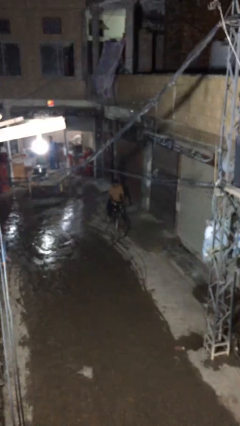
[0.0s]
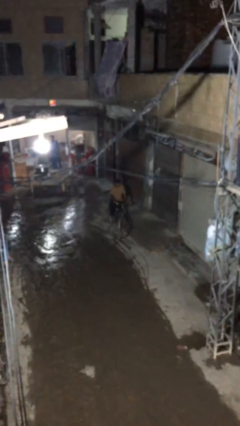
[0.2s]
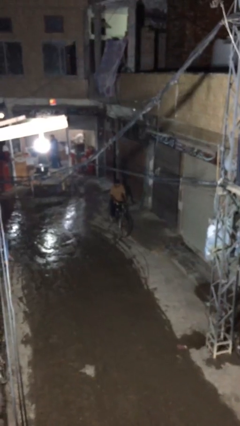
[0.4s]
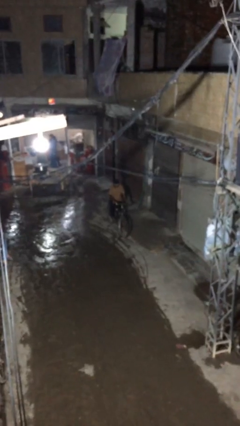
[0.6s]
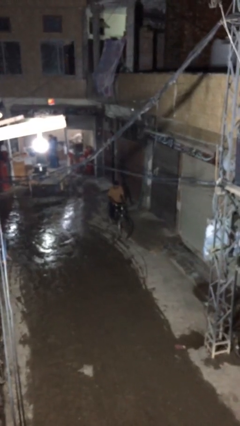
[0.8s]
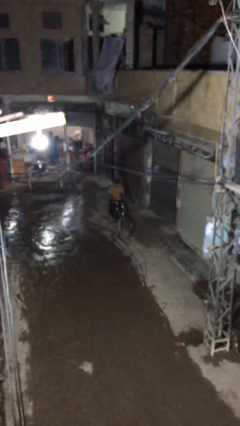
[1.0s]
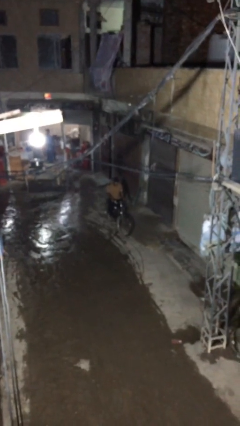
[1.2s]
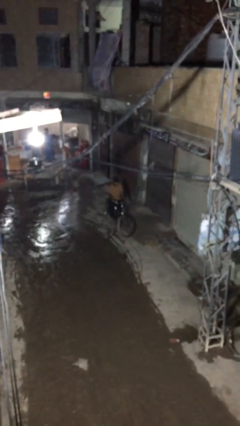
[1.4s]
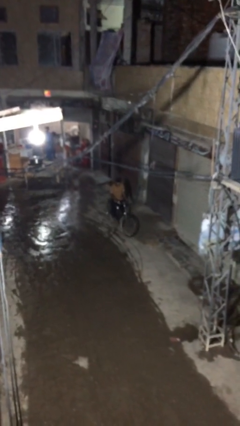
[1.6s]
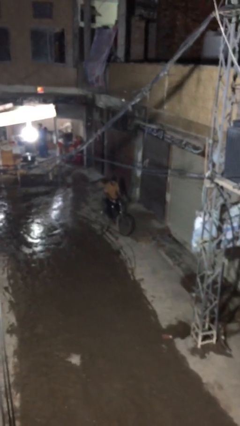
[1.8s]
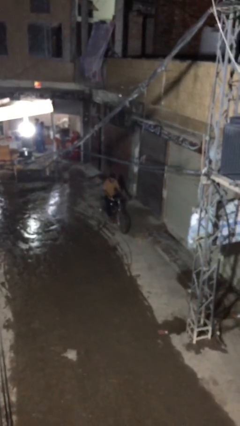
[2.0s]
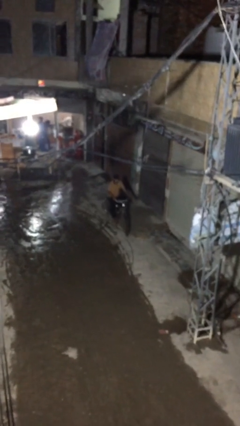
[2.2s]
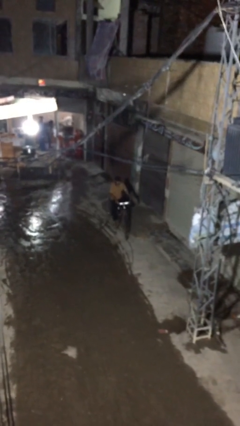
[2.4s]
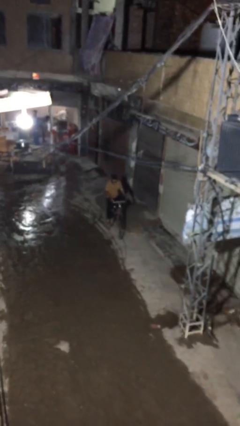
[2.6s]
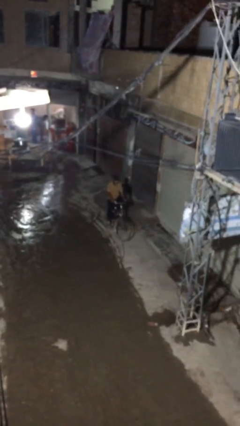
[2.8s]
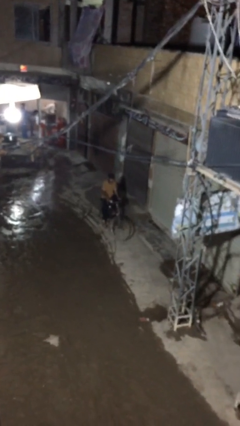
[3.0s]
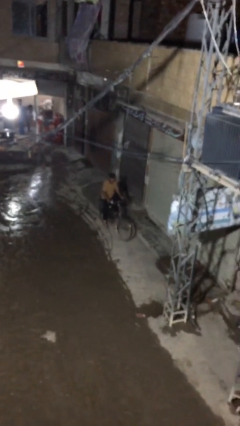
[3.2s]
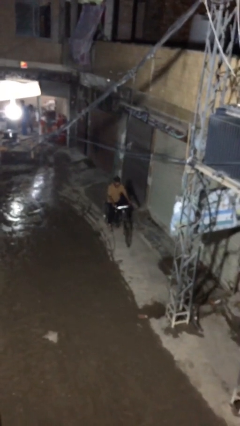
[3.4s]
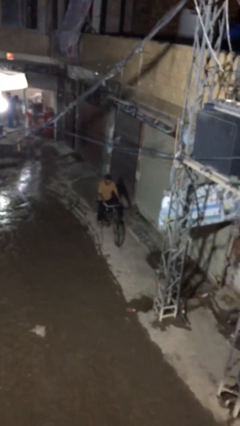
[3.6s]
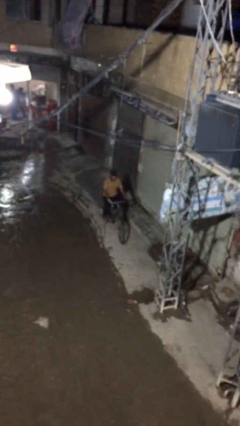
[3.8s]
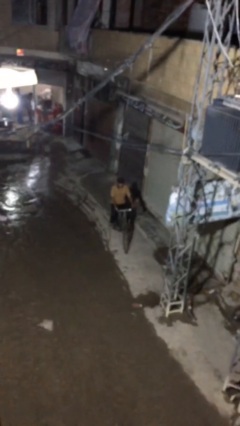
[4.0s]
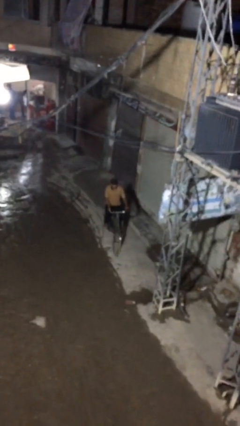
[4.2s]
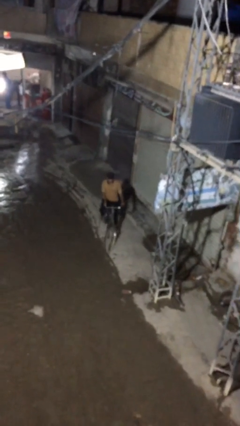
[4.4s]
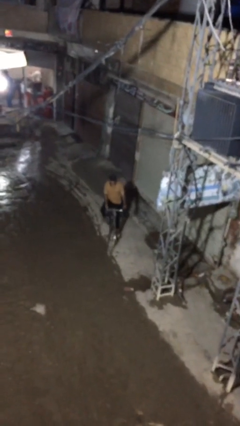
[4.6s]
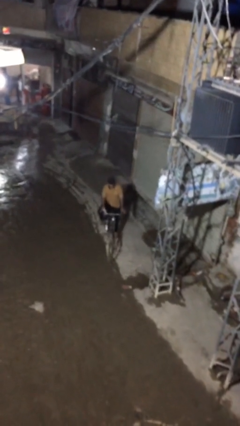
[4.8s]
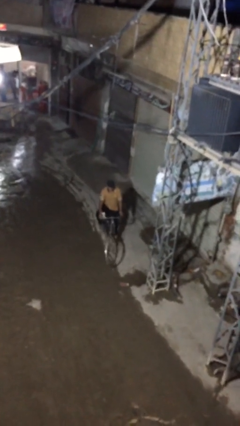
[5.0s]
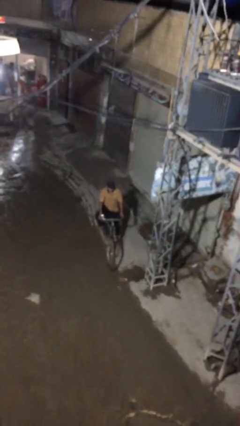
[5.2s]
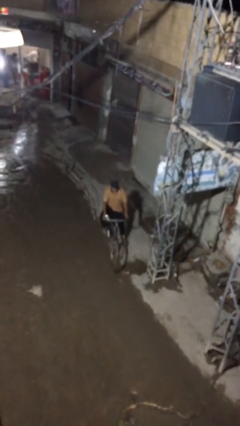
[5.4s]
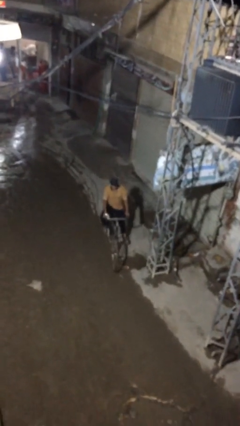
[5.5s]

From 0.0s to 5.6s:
person rides bicycle

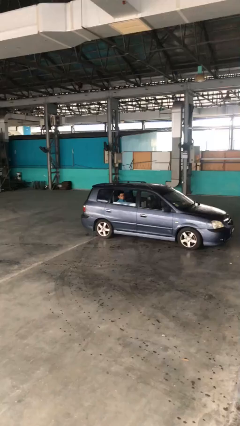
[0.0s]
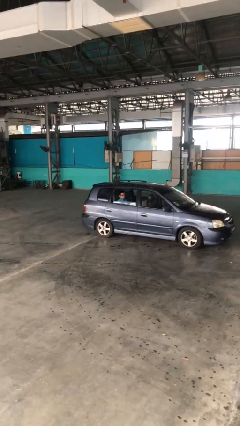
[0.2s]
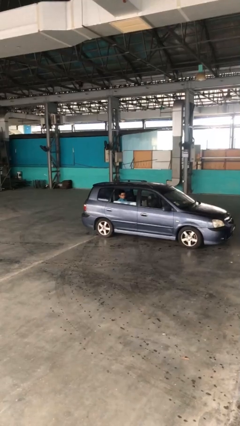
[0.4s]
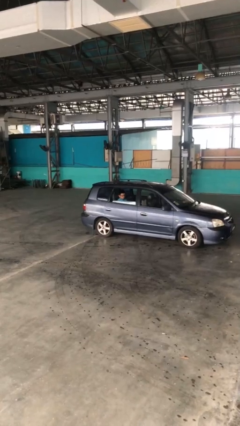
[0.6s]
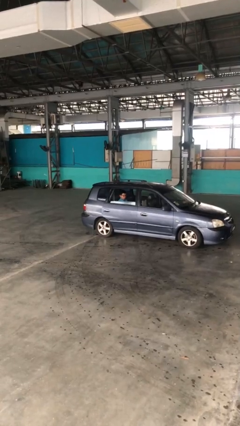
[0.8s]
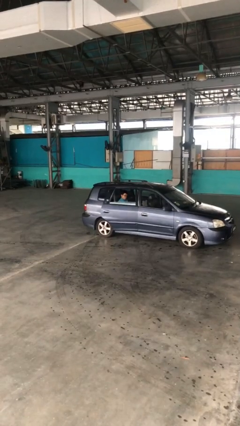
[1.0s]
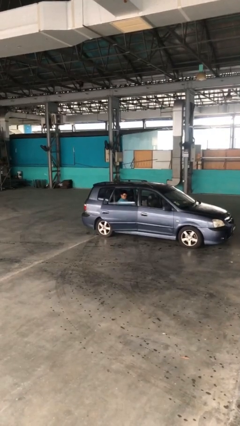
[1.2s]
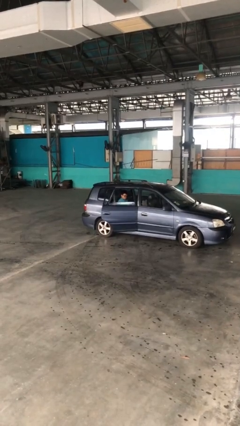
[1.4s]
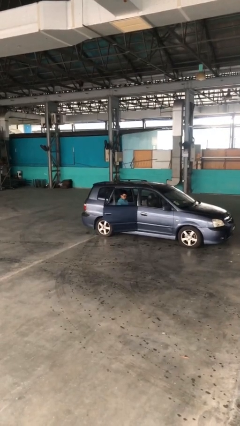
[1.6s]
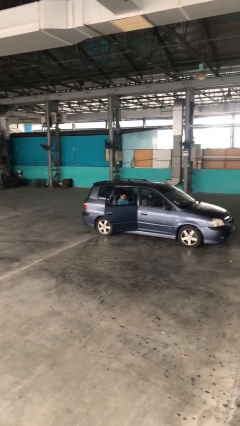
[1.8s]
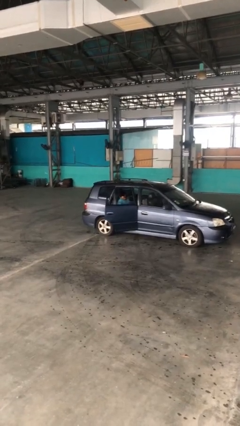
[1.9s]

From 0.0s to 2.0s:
person opens car door

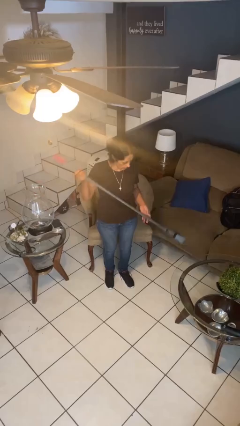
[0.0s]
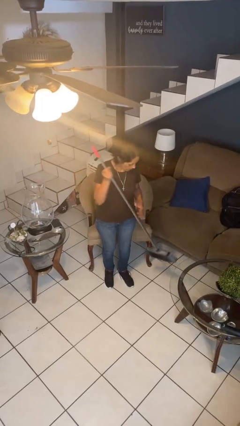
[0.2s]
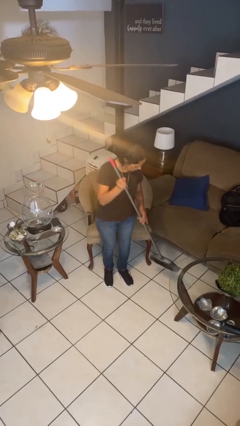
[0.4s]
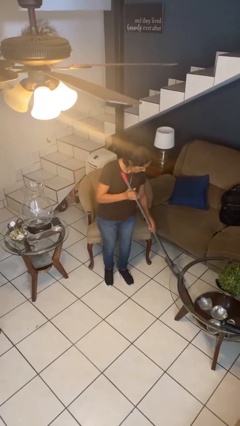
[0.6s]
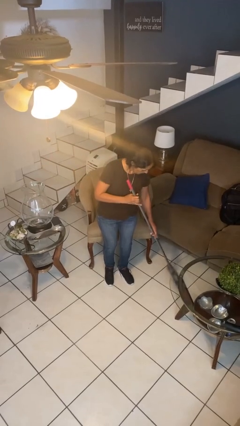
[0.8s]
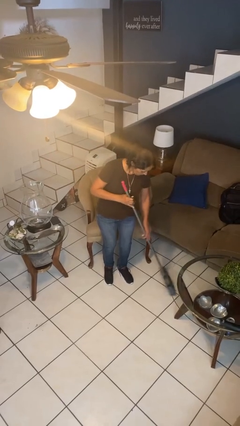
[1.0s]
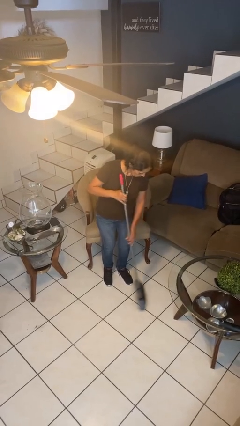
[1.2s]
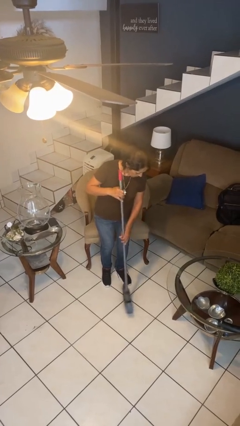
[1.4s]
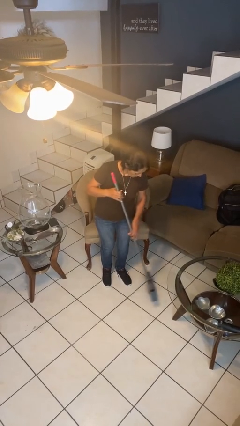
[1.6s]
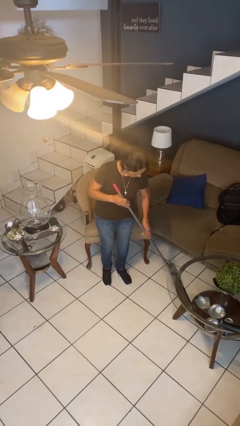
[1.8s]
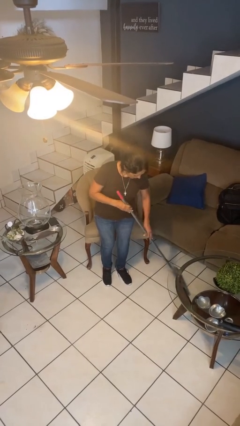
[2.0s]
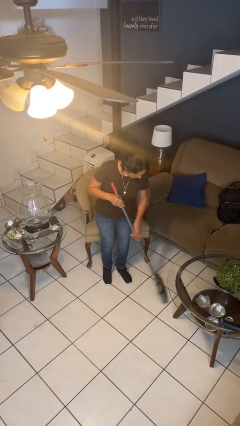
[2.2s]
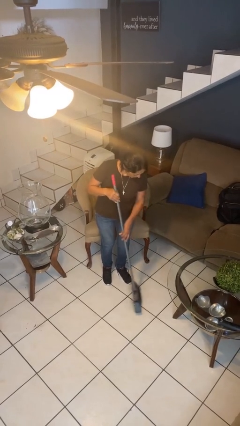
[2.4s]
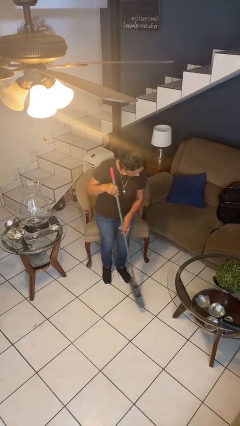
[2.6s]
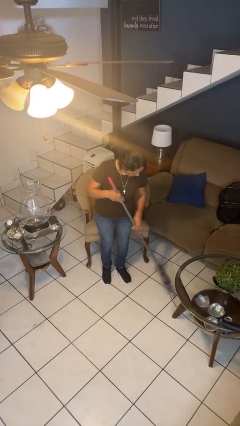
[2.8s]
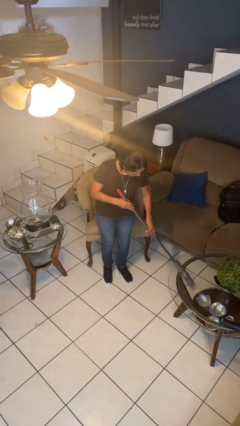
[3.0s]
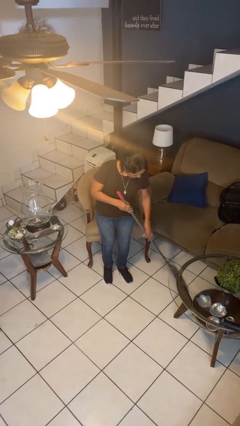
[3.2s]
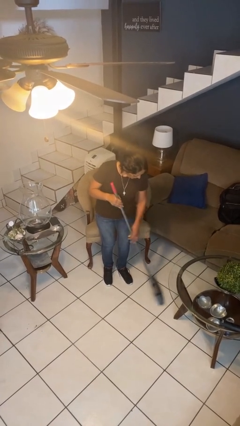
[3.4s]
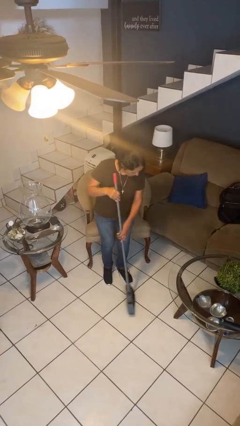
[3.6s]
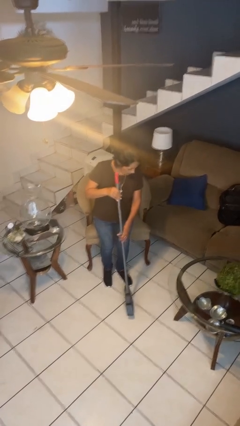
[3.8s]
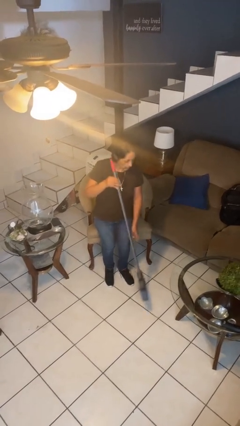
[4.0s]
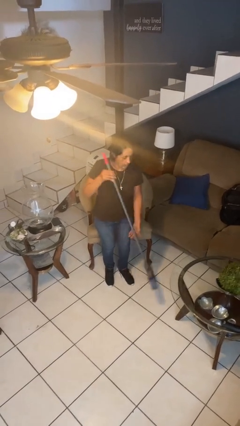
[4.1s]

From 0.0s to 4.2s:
person sweeps floor

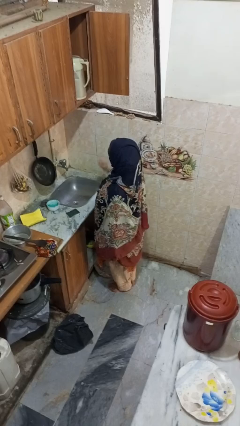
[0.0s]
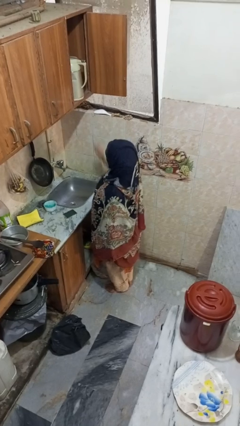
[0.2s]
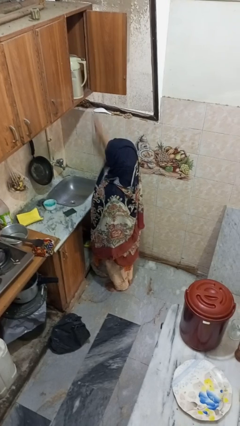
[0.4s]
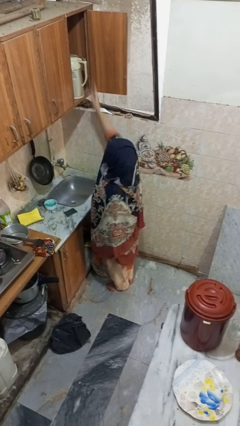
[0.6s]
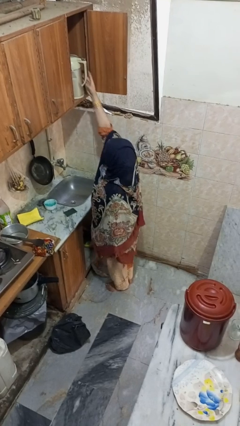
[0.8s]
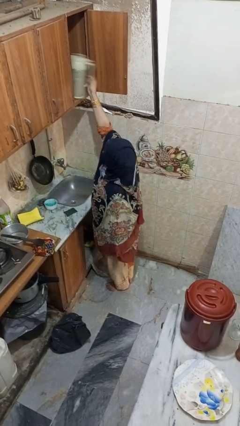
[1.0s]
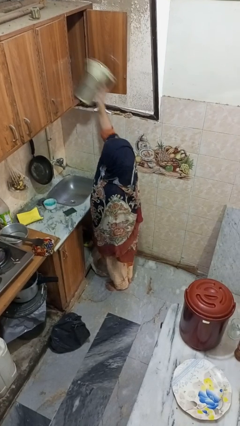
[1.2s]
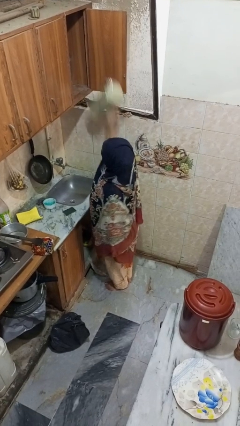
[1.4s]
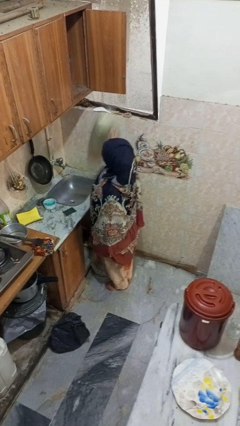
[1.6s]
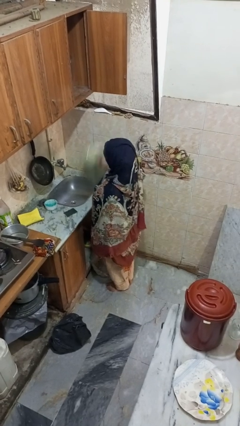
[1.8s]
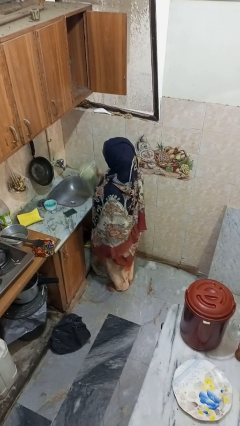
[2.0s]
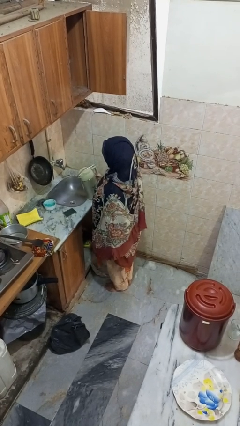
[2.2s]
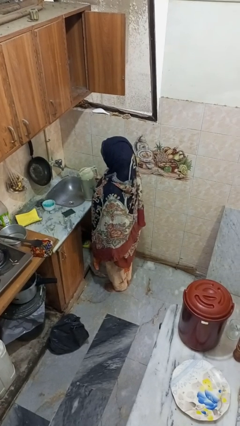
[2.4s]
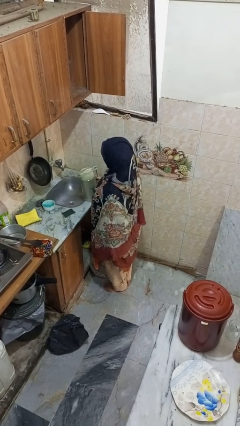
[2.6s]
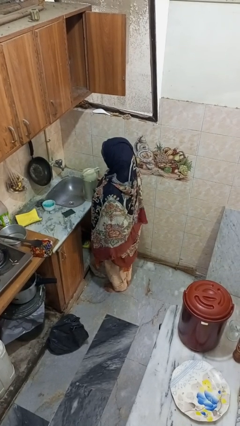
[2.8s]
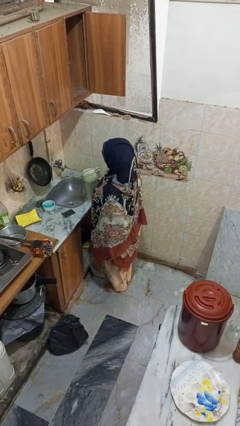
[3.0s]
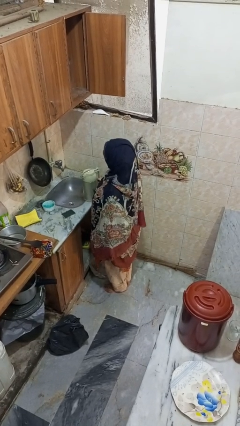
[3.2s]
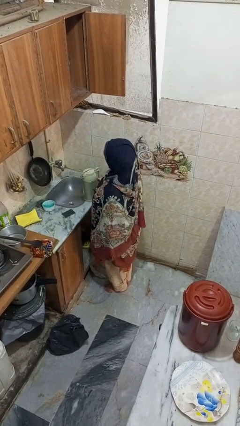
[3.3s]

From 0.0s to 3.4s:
person puts object in cabinet

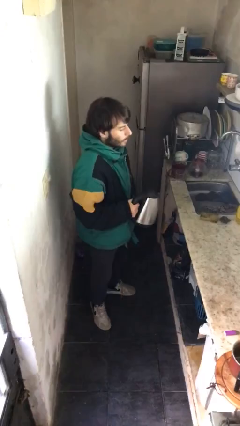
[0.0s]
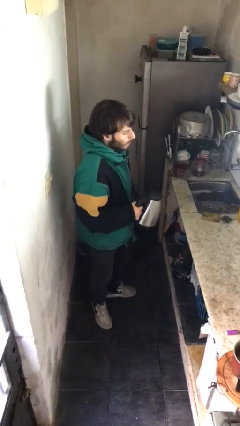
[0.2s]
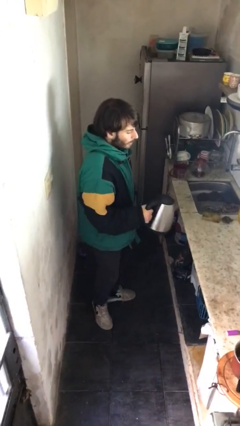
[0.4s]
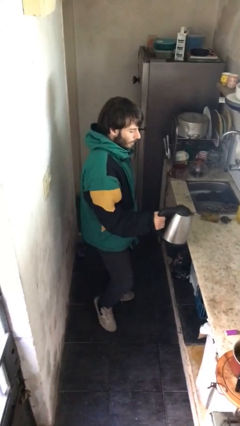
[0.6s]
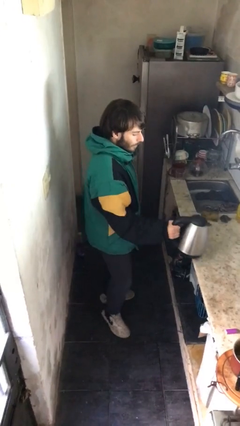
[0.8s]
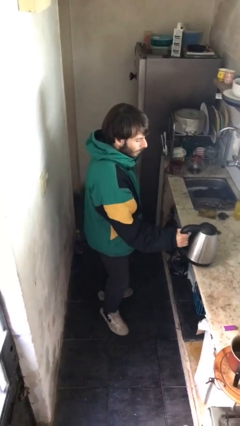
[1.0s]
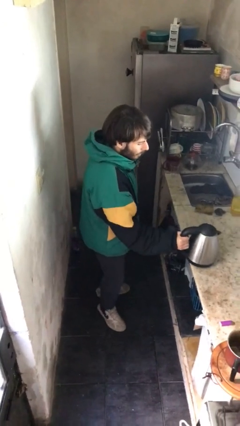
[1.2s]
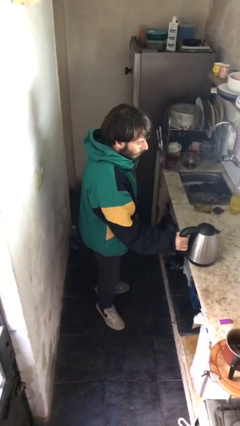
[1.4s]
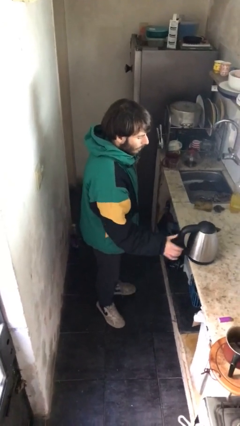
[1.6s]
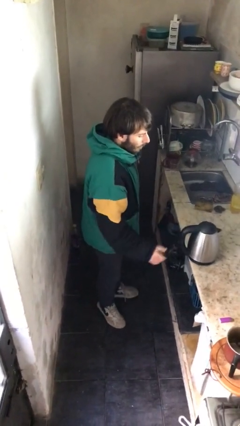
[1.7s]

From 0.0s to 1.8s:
person puts down object on countertop

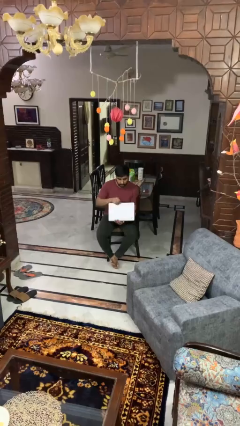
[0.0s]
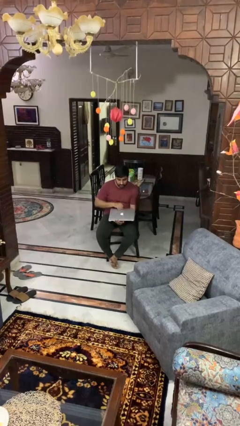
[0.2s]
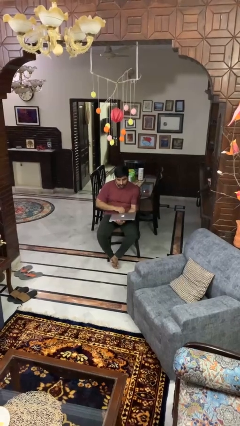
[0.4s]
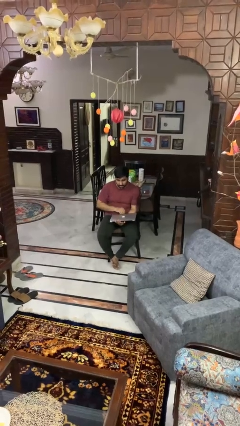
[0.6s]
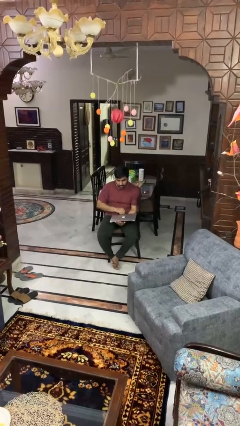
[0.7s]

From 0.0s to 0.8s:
person closes laptop
